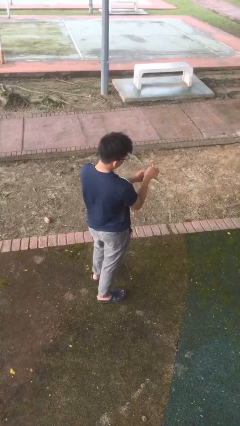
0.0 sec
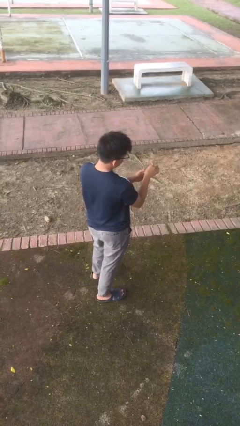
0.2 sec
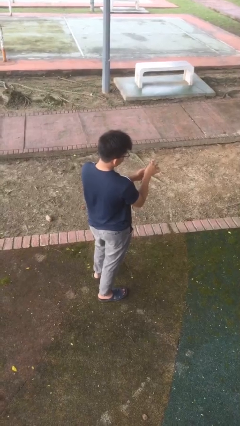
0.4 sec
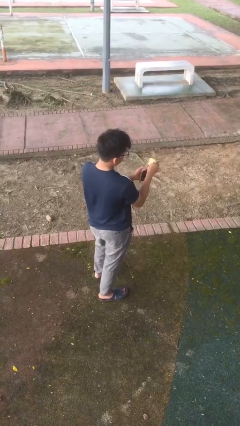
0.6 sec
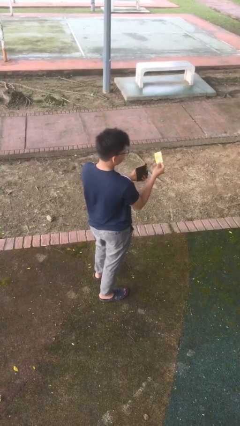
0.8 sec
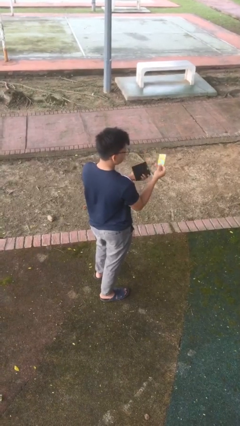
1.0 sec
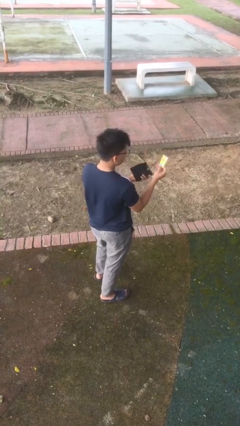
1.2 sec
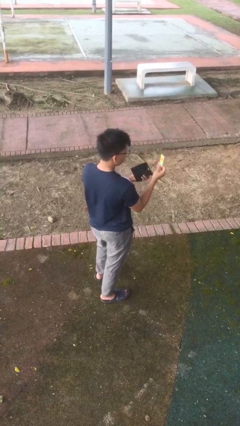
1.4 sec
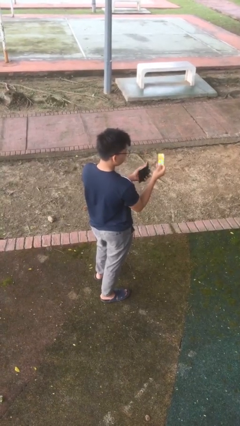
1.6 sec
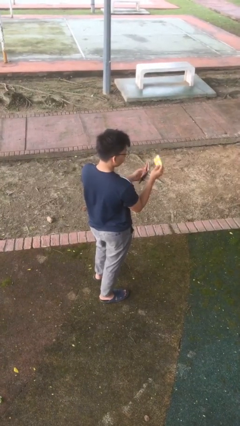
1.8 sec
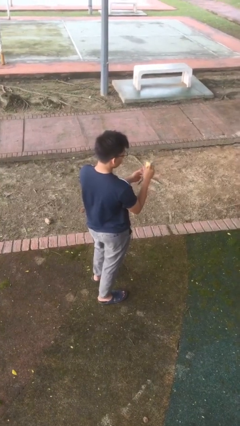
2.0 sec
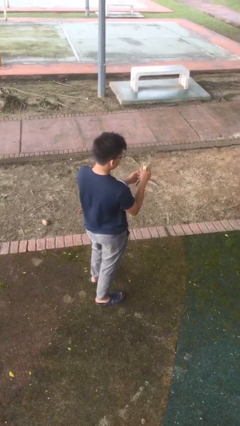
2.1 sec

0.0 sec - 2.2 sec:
person takes object from purse

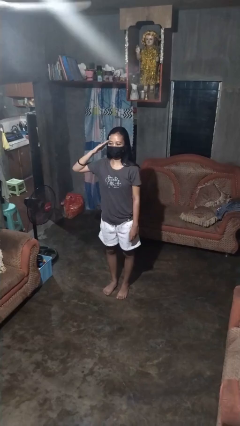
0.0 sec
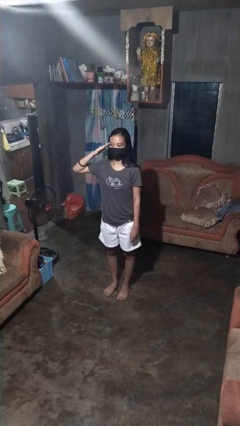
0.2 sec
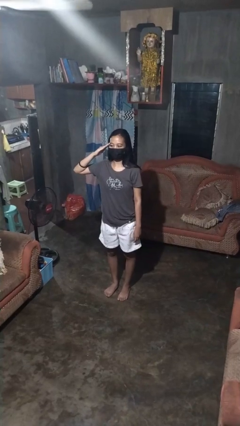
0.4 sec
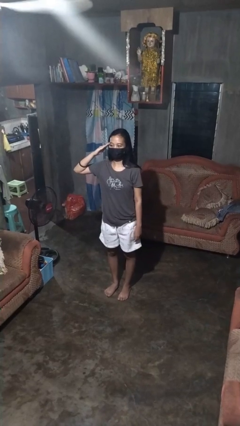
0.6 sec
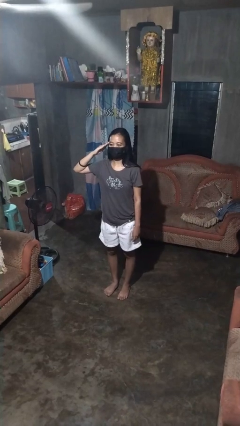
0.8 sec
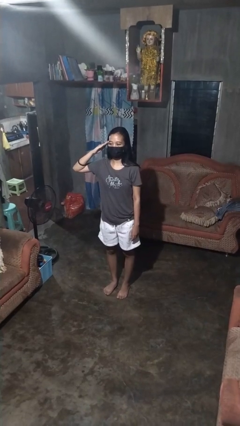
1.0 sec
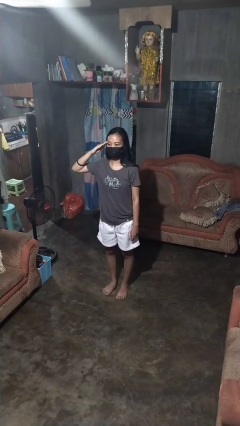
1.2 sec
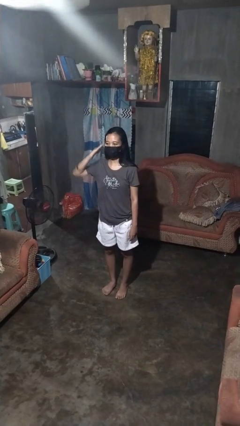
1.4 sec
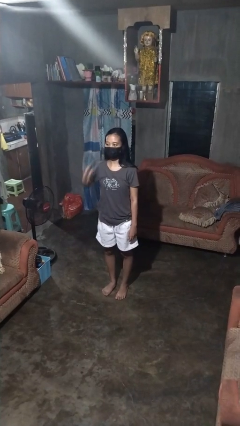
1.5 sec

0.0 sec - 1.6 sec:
person salutes

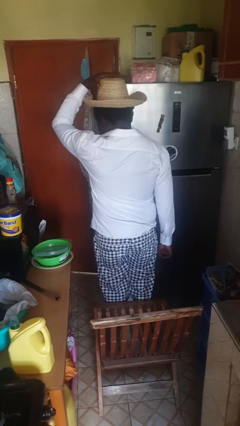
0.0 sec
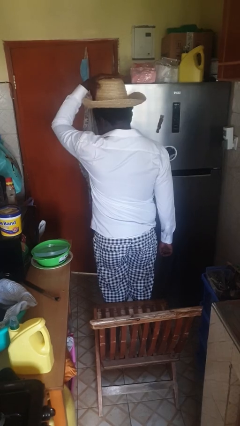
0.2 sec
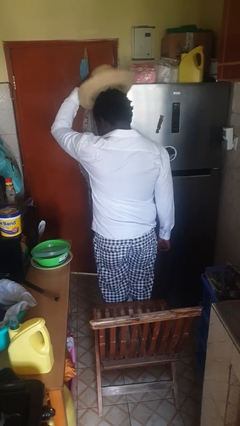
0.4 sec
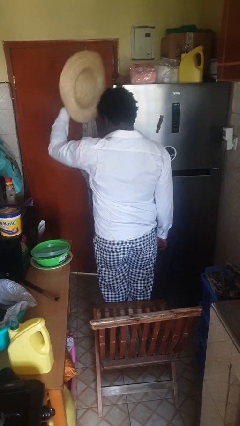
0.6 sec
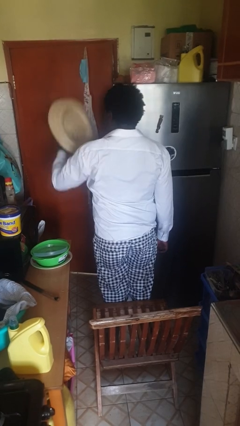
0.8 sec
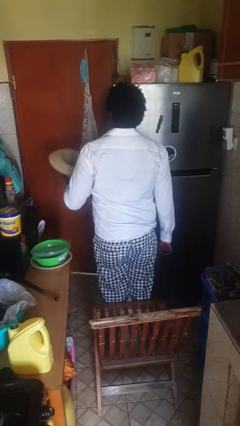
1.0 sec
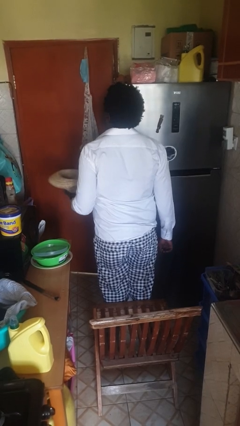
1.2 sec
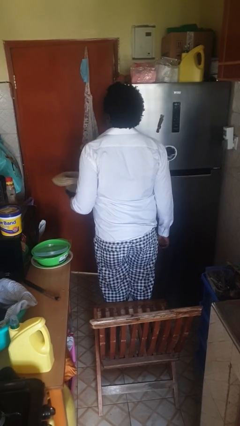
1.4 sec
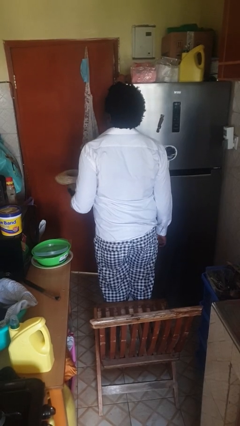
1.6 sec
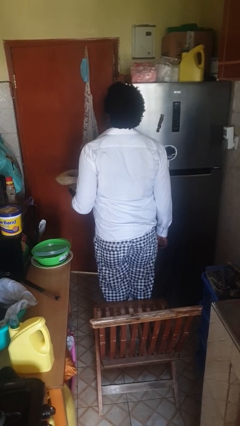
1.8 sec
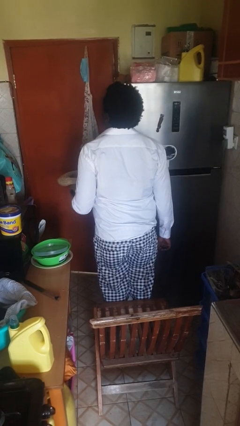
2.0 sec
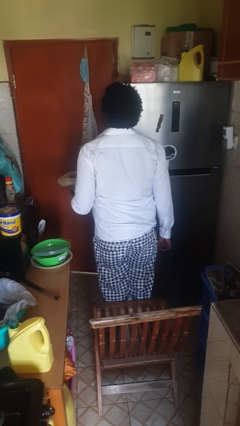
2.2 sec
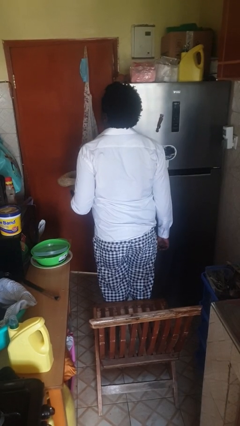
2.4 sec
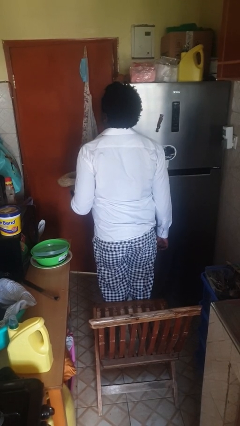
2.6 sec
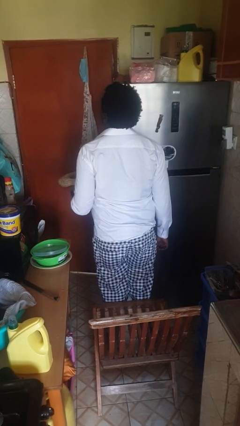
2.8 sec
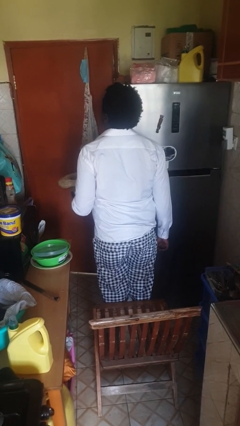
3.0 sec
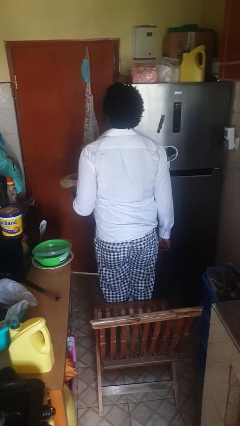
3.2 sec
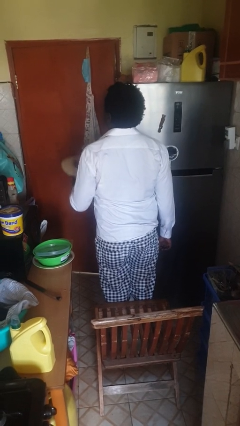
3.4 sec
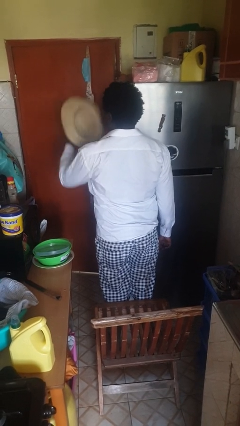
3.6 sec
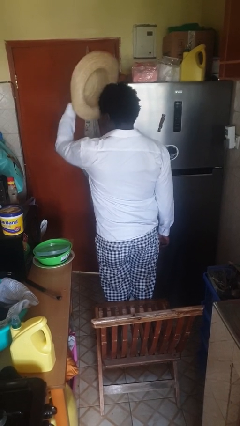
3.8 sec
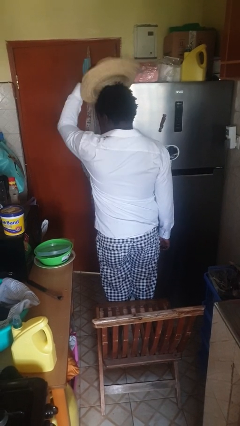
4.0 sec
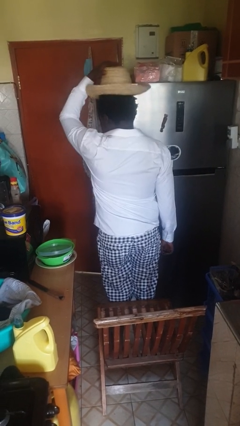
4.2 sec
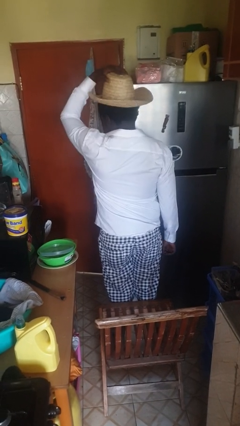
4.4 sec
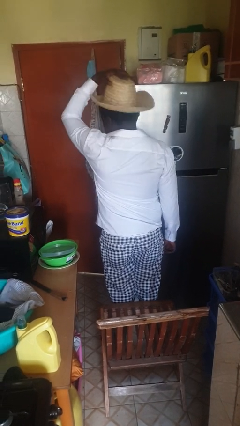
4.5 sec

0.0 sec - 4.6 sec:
person takes off hat

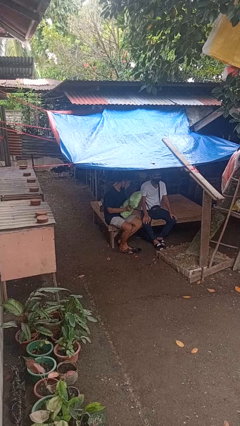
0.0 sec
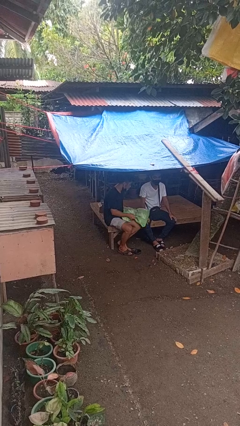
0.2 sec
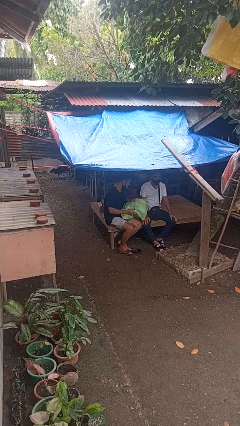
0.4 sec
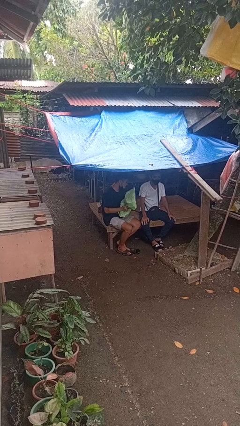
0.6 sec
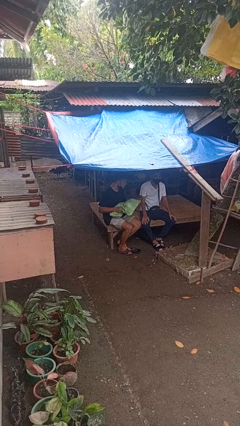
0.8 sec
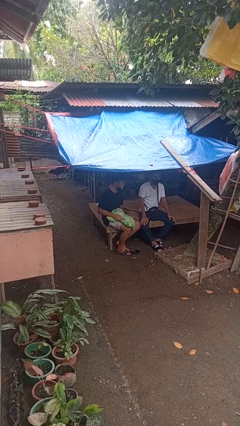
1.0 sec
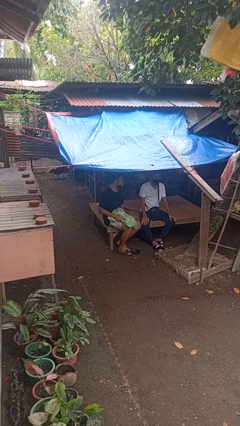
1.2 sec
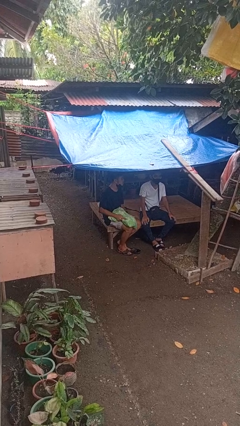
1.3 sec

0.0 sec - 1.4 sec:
person hits person with pillow

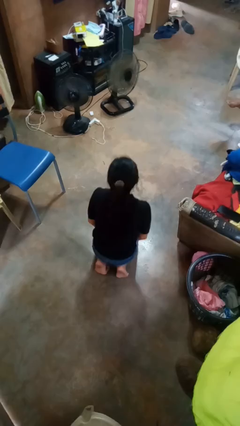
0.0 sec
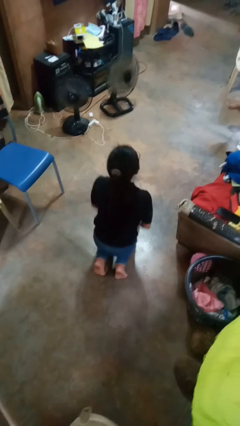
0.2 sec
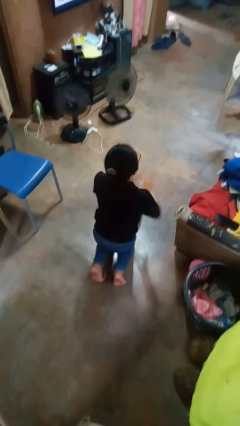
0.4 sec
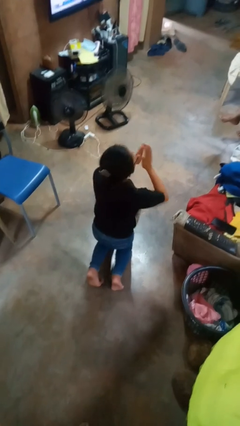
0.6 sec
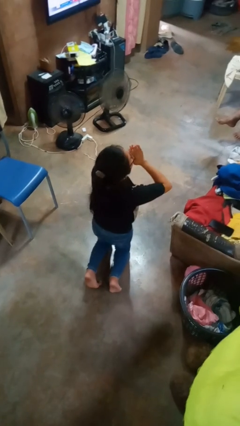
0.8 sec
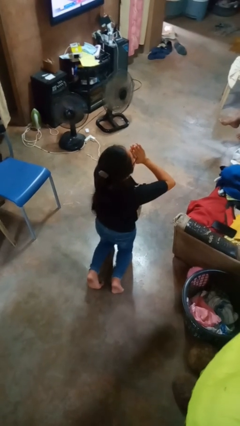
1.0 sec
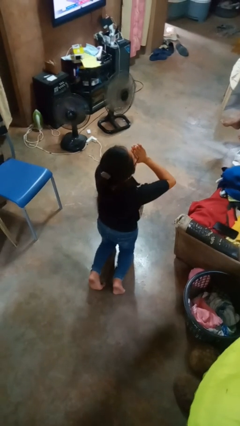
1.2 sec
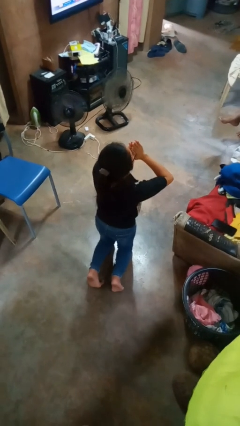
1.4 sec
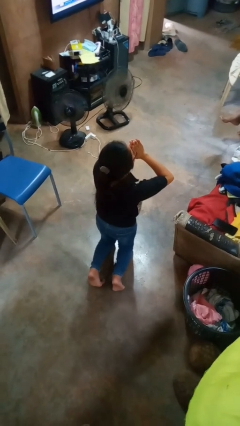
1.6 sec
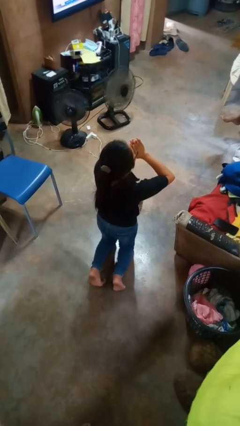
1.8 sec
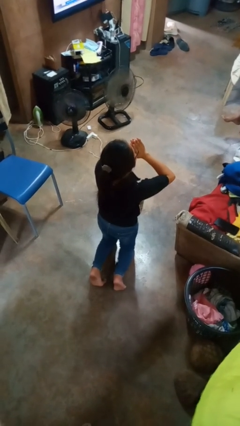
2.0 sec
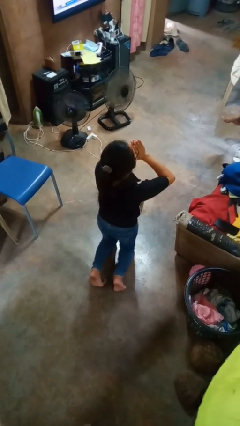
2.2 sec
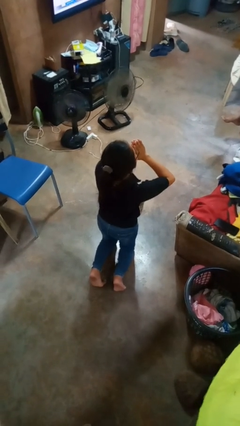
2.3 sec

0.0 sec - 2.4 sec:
person prays

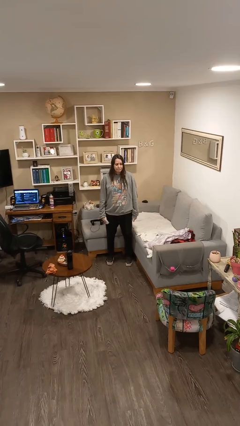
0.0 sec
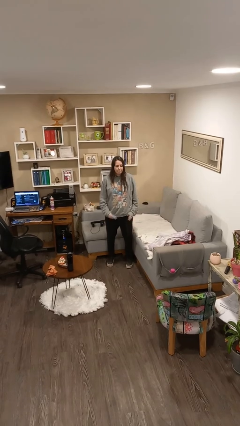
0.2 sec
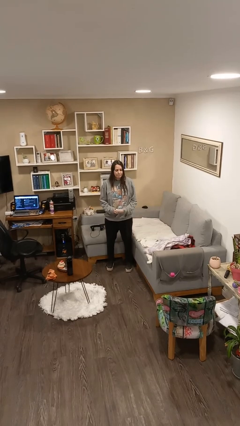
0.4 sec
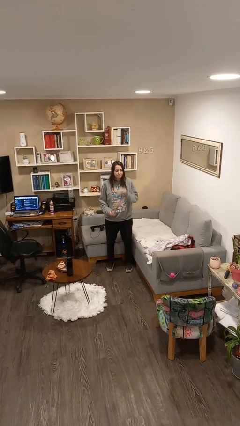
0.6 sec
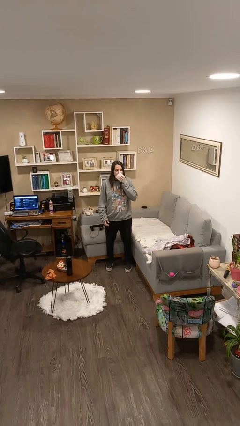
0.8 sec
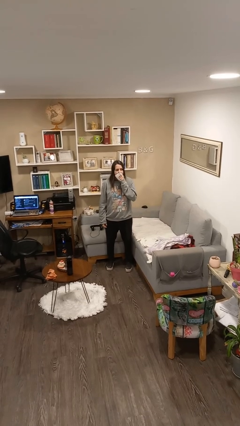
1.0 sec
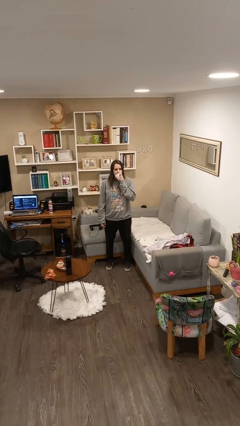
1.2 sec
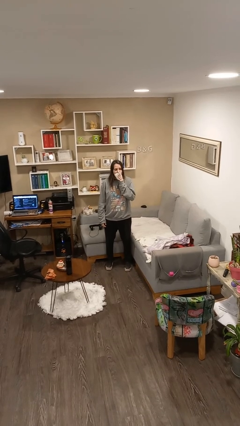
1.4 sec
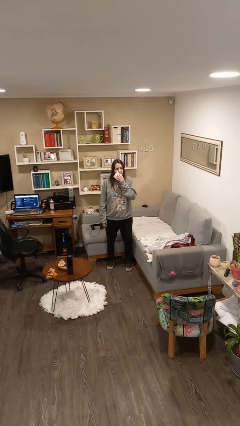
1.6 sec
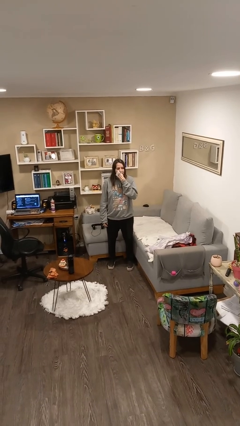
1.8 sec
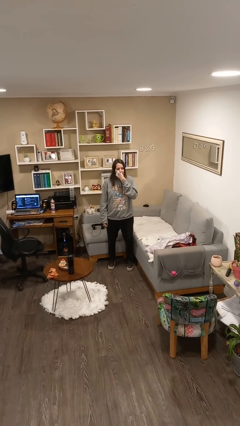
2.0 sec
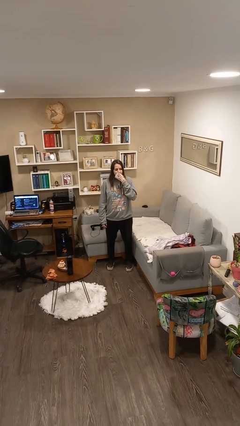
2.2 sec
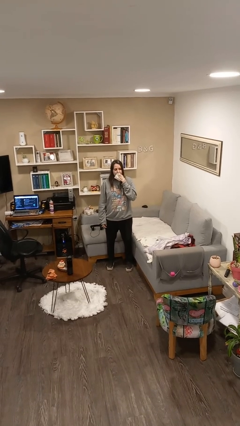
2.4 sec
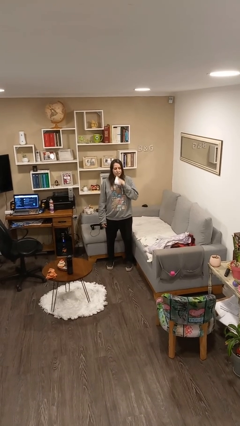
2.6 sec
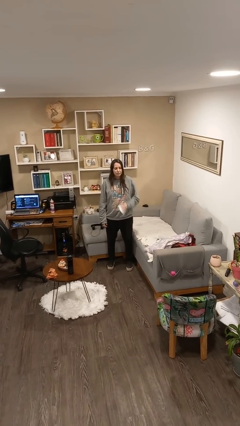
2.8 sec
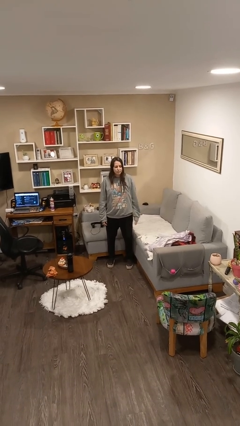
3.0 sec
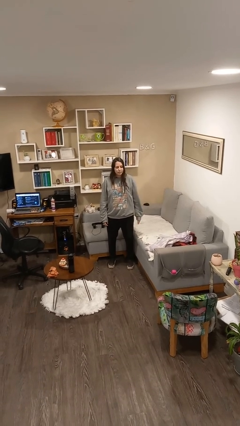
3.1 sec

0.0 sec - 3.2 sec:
person wipes mouth with napkin

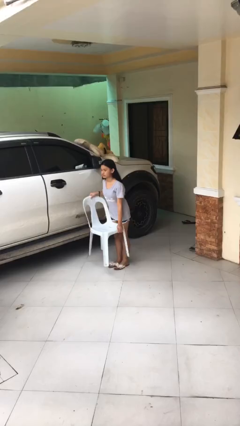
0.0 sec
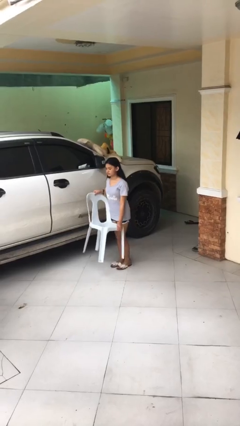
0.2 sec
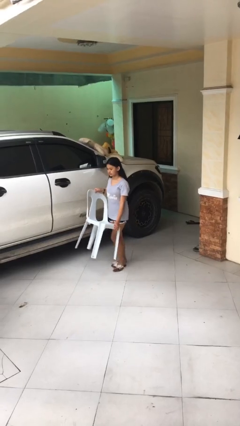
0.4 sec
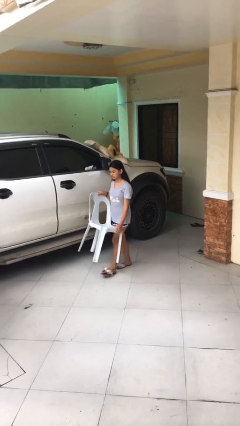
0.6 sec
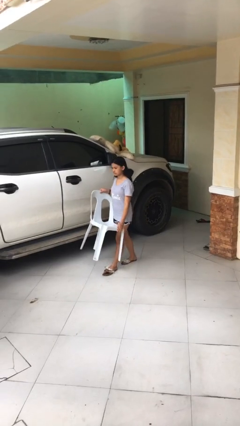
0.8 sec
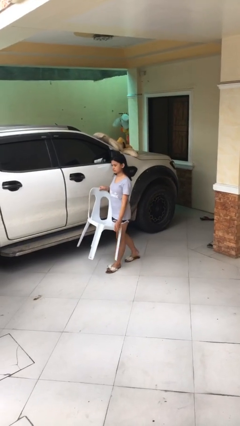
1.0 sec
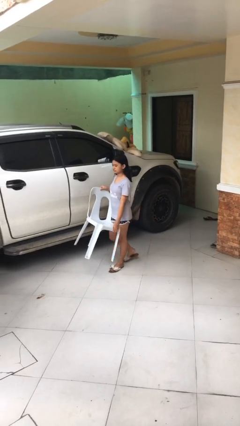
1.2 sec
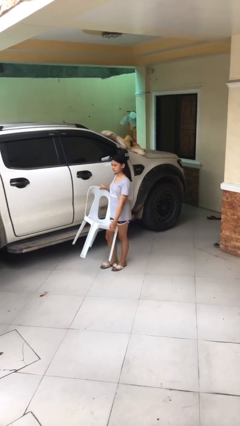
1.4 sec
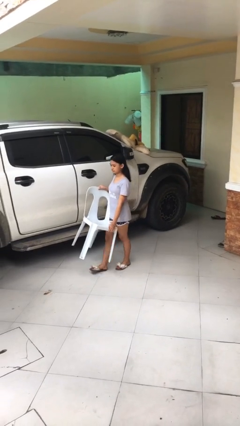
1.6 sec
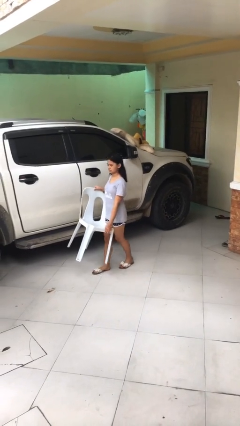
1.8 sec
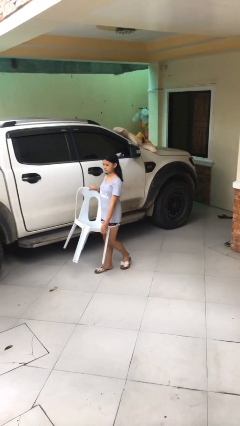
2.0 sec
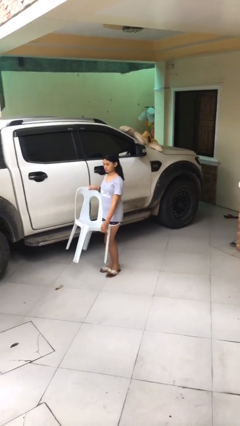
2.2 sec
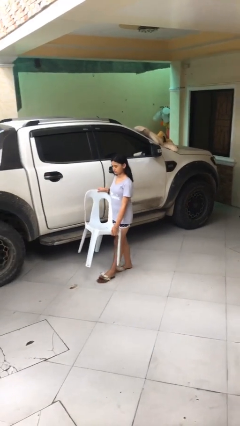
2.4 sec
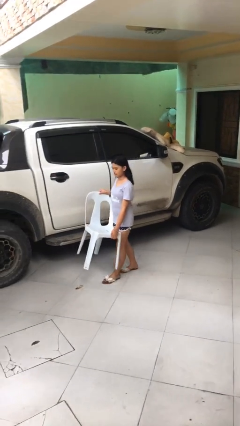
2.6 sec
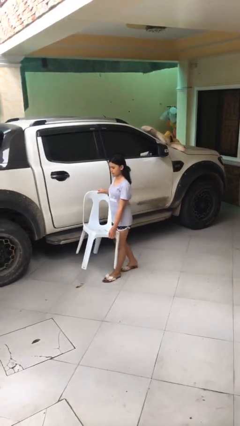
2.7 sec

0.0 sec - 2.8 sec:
person carries heavy object
